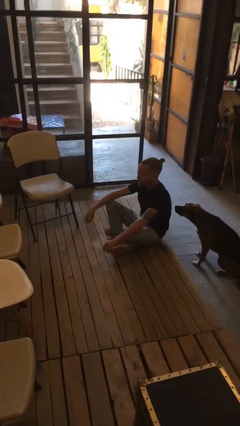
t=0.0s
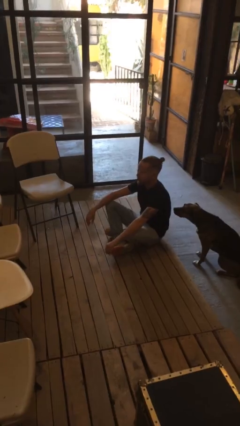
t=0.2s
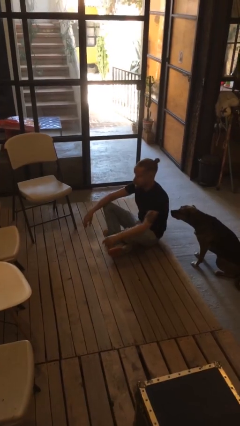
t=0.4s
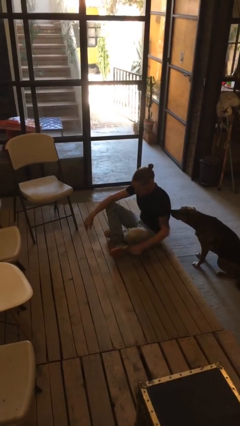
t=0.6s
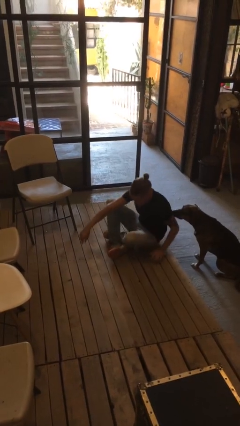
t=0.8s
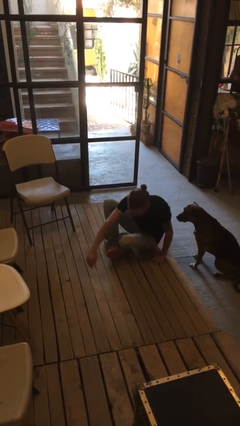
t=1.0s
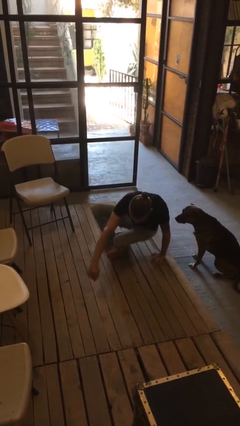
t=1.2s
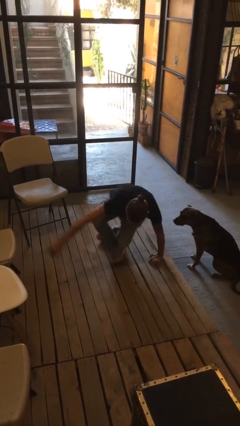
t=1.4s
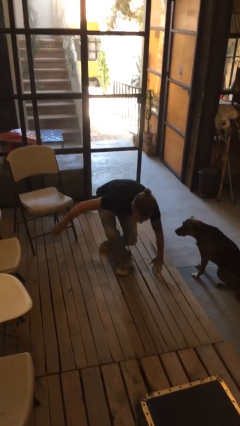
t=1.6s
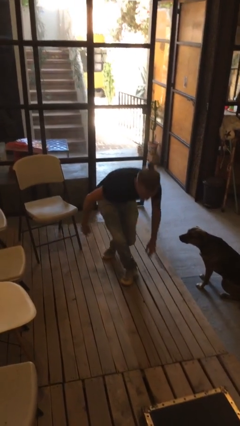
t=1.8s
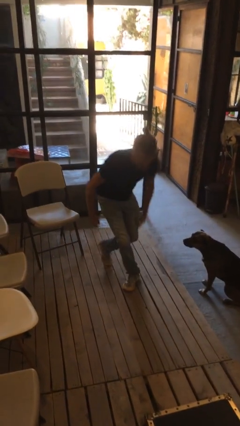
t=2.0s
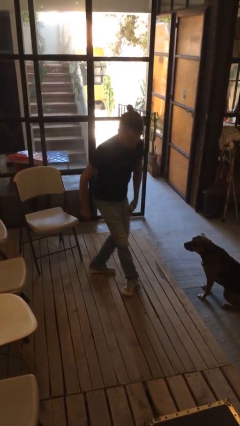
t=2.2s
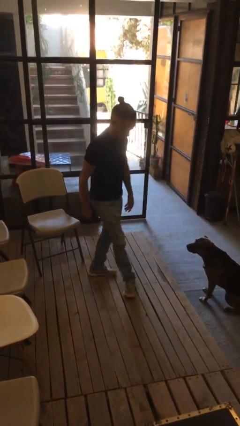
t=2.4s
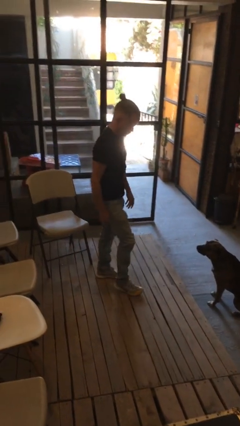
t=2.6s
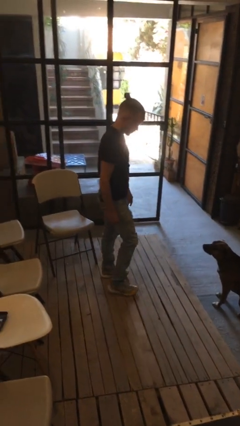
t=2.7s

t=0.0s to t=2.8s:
person stands up from floor

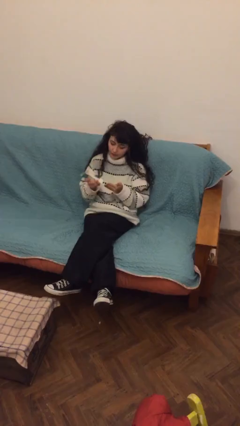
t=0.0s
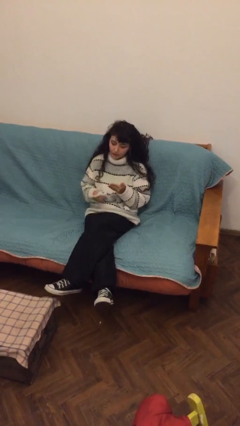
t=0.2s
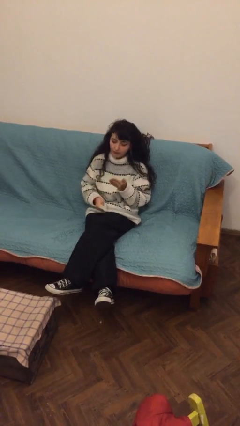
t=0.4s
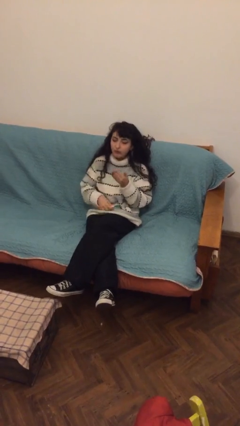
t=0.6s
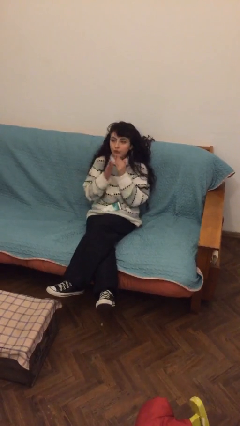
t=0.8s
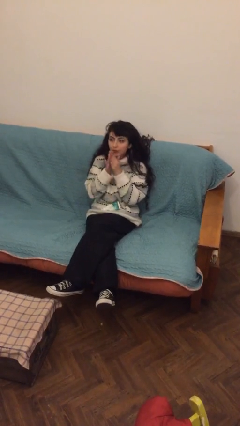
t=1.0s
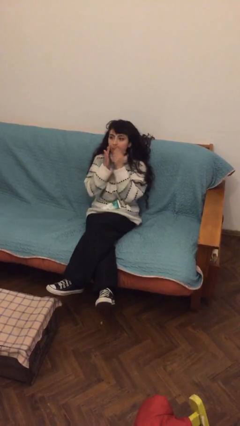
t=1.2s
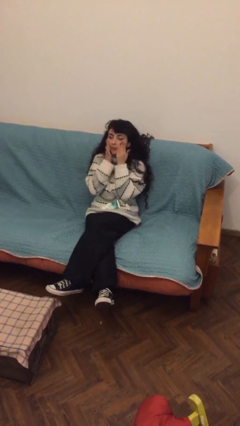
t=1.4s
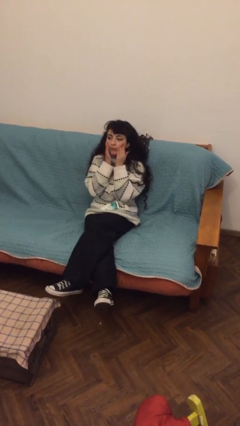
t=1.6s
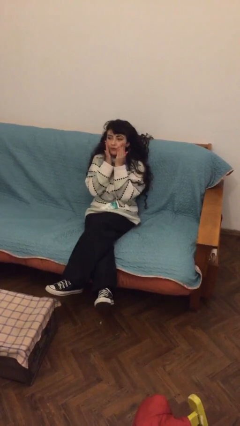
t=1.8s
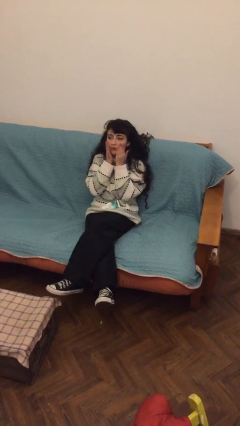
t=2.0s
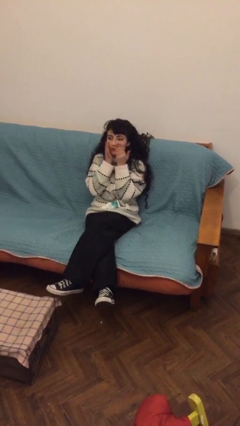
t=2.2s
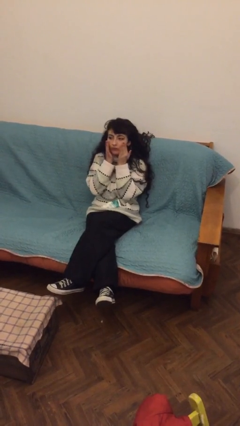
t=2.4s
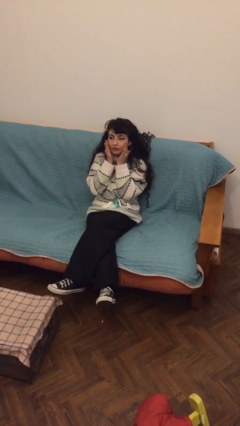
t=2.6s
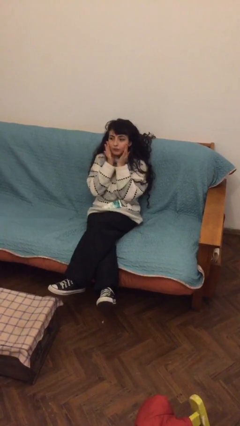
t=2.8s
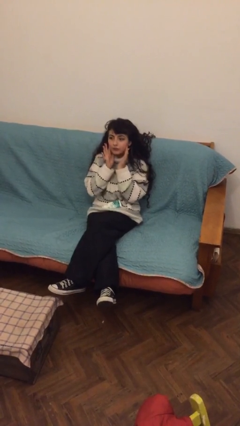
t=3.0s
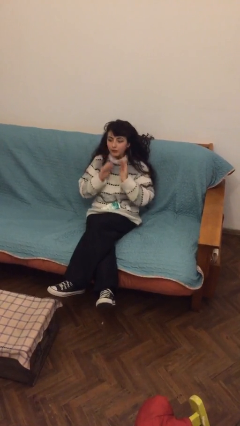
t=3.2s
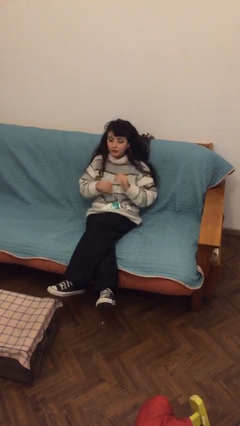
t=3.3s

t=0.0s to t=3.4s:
person applies facial moisturizer

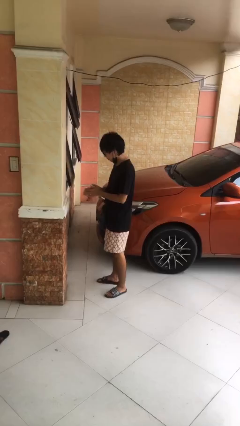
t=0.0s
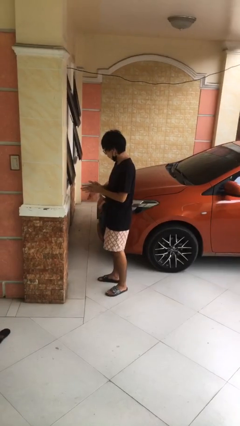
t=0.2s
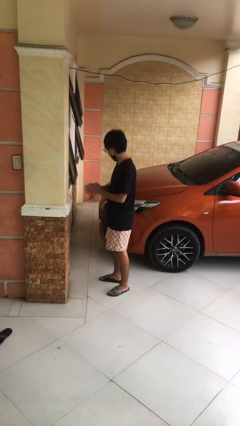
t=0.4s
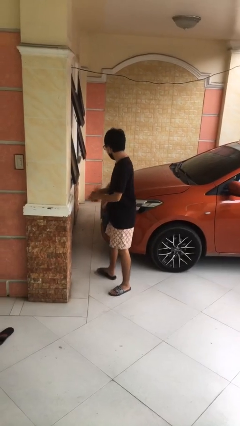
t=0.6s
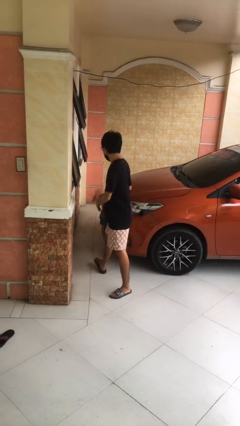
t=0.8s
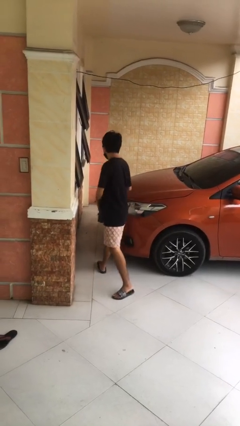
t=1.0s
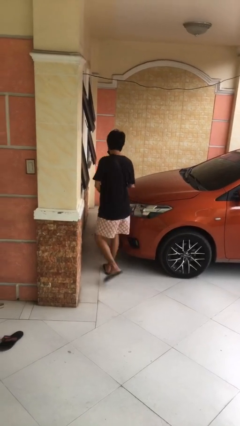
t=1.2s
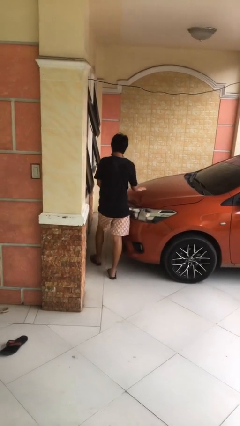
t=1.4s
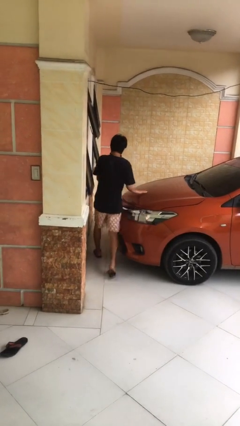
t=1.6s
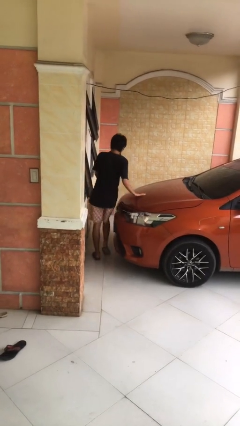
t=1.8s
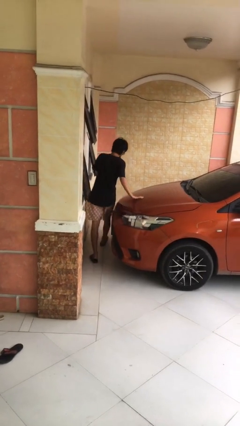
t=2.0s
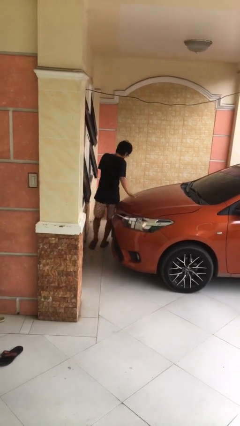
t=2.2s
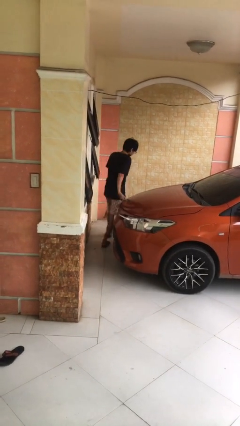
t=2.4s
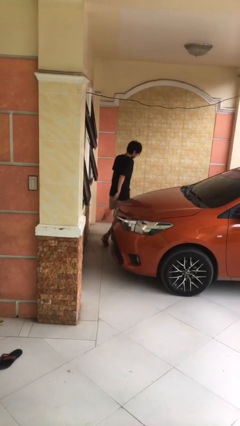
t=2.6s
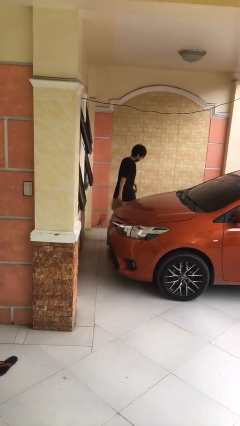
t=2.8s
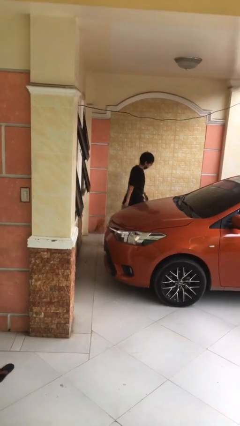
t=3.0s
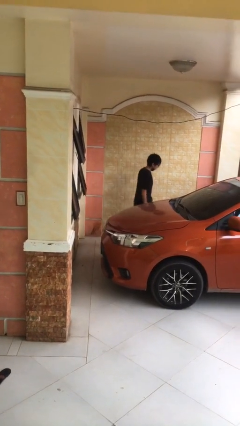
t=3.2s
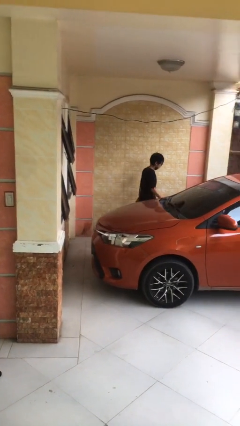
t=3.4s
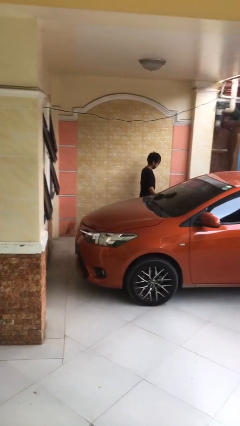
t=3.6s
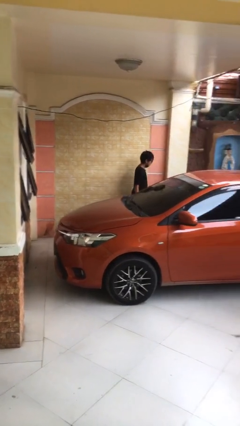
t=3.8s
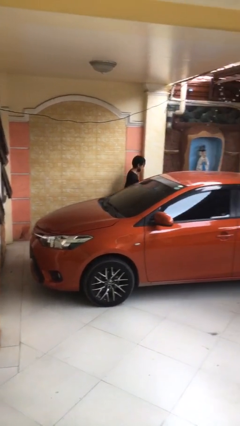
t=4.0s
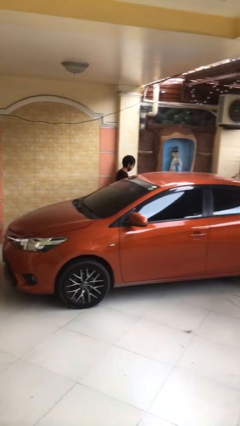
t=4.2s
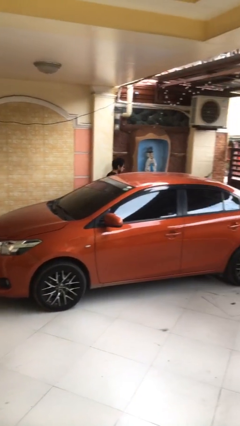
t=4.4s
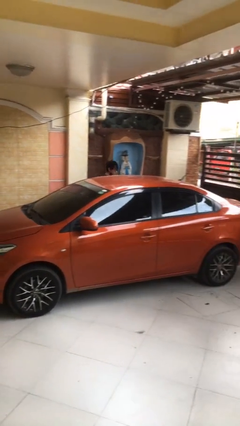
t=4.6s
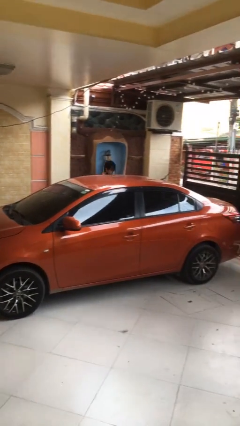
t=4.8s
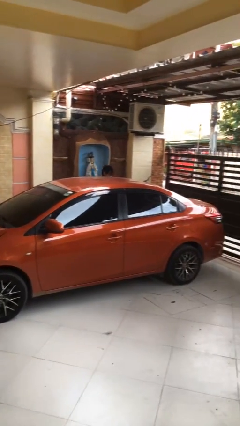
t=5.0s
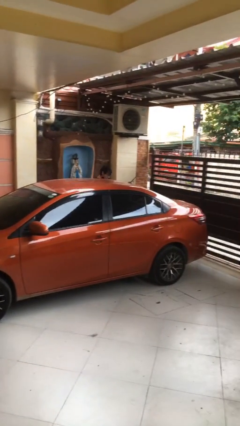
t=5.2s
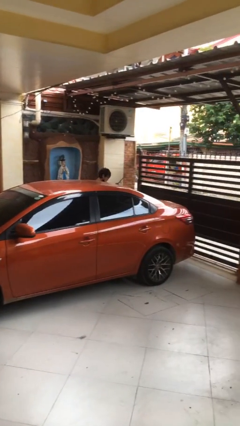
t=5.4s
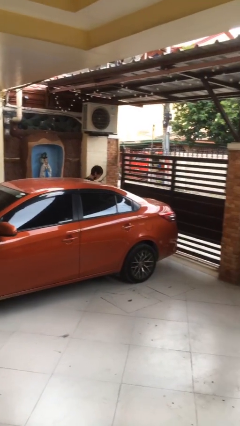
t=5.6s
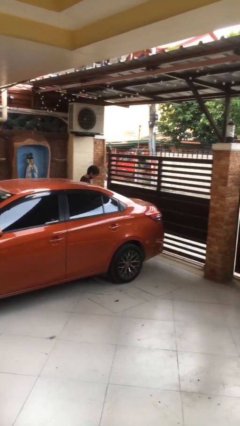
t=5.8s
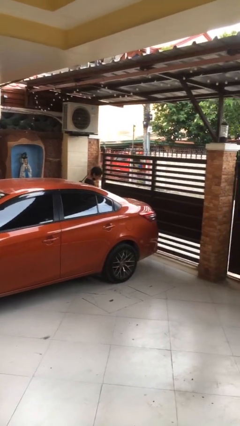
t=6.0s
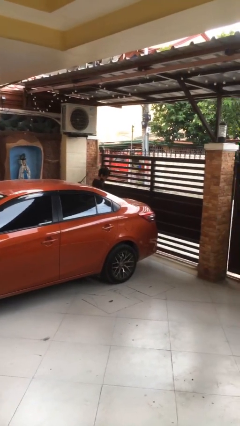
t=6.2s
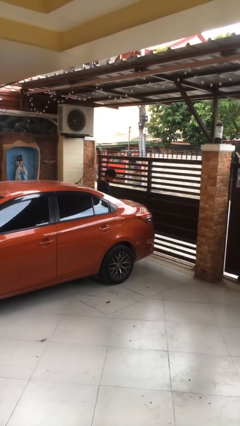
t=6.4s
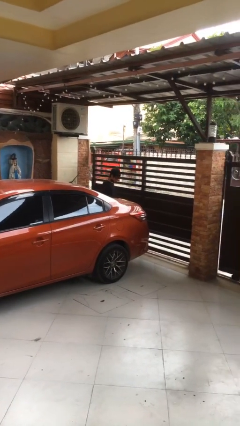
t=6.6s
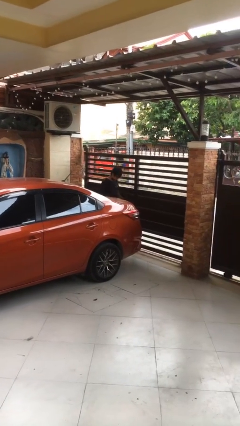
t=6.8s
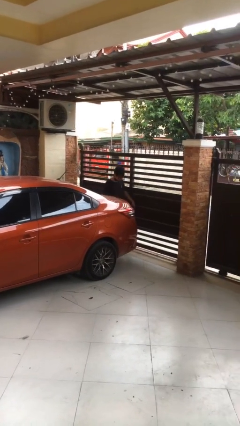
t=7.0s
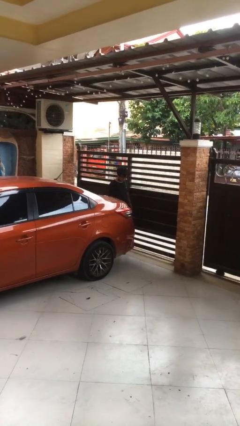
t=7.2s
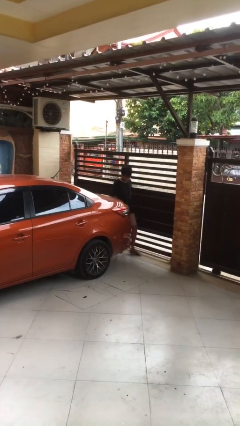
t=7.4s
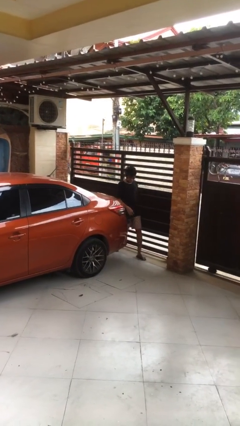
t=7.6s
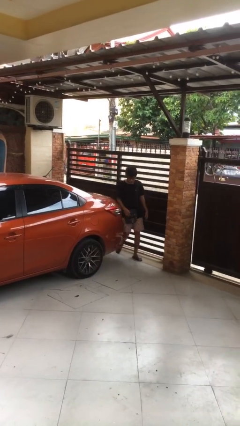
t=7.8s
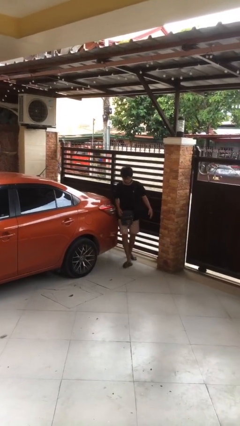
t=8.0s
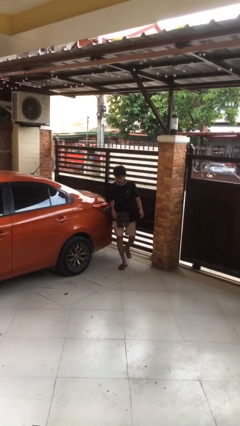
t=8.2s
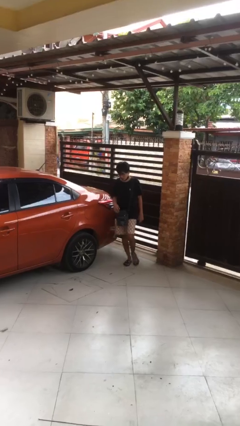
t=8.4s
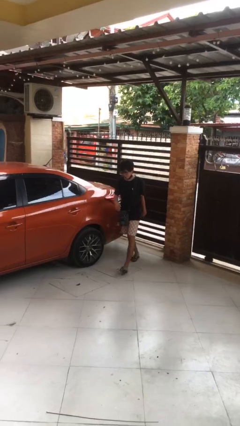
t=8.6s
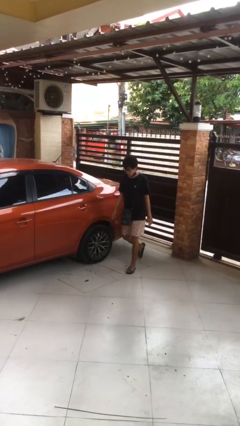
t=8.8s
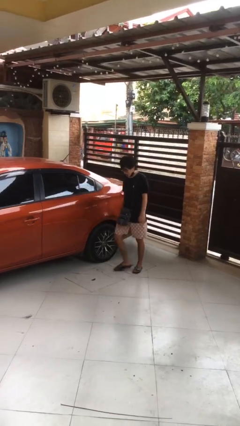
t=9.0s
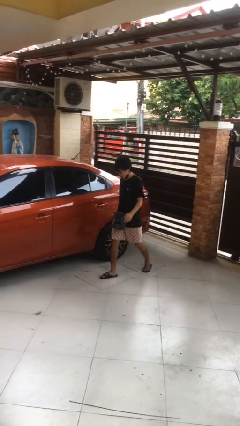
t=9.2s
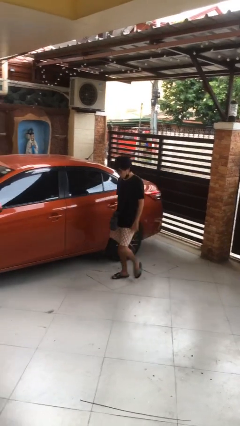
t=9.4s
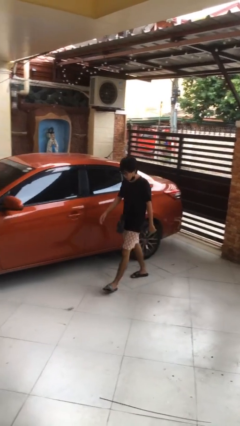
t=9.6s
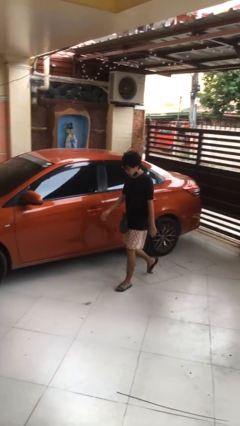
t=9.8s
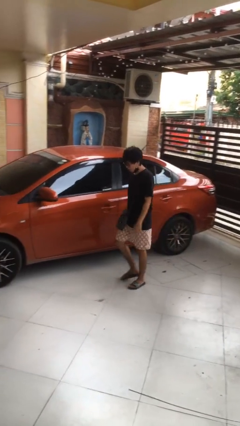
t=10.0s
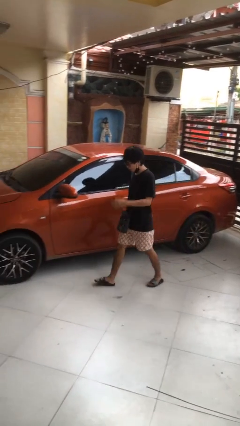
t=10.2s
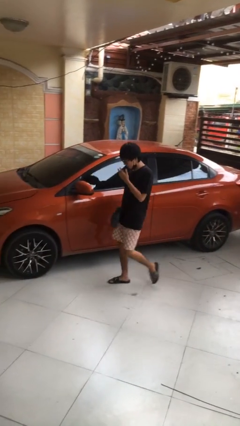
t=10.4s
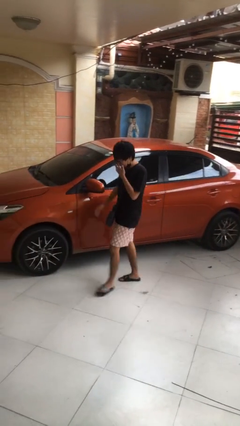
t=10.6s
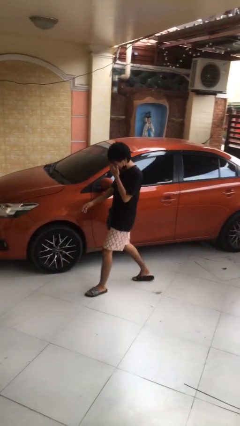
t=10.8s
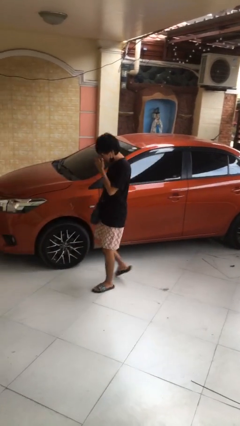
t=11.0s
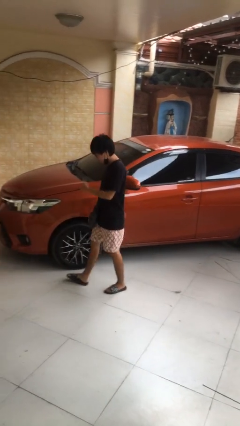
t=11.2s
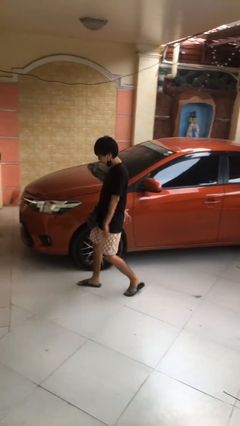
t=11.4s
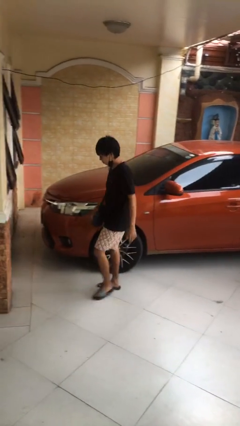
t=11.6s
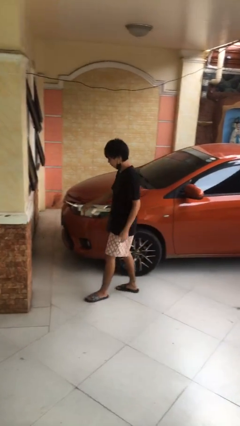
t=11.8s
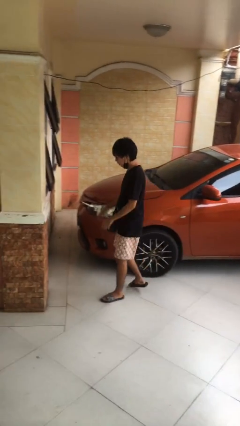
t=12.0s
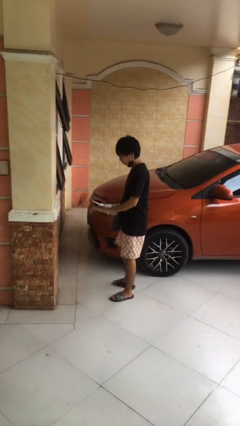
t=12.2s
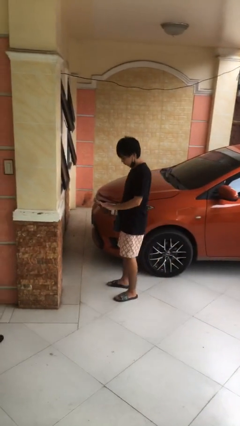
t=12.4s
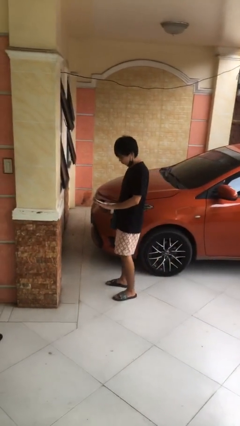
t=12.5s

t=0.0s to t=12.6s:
person walks around car
